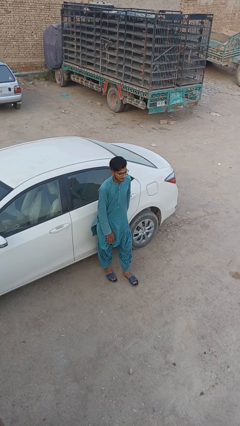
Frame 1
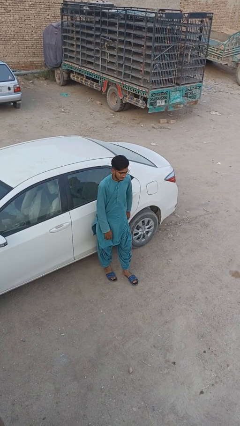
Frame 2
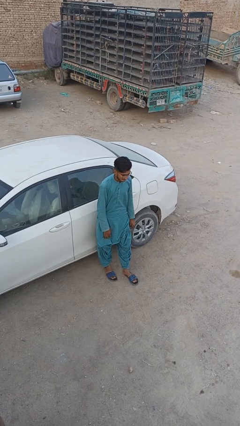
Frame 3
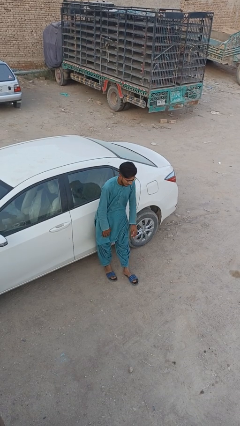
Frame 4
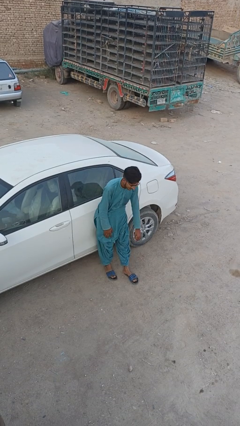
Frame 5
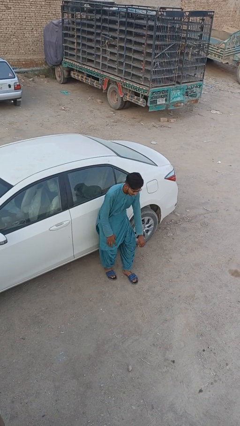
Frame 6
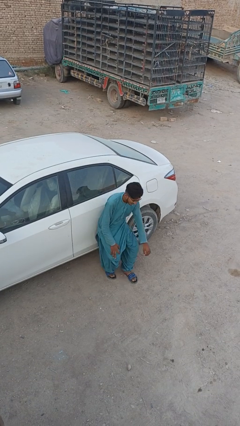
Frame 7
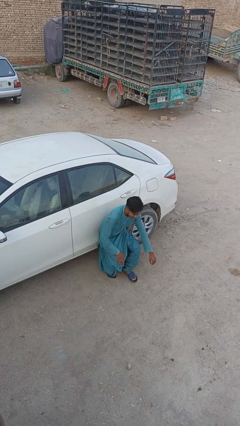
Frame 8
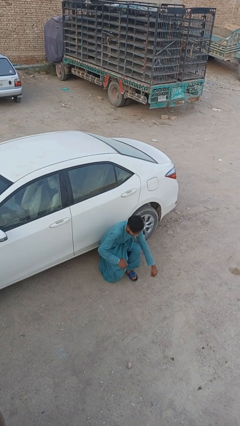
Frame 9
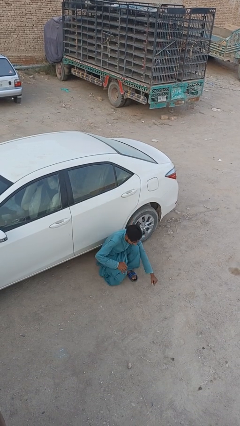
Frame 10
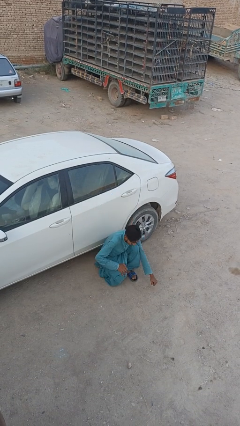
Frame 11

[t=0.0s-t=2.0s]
person leans against car

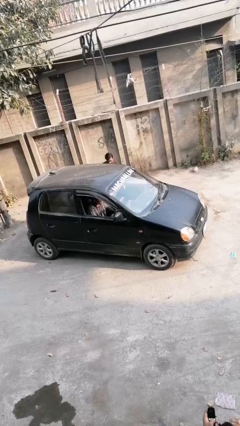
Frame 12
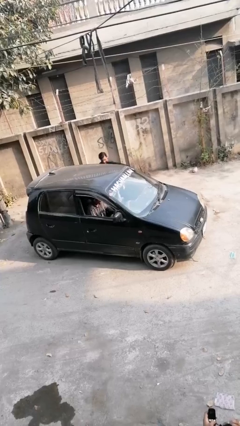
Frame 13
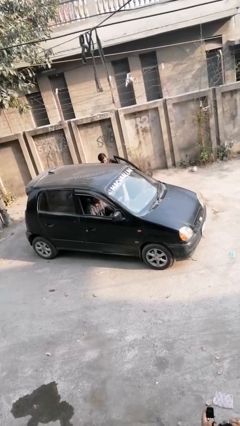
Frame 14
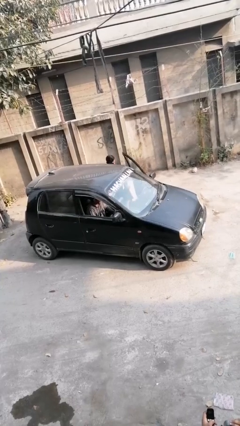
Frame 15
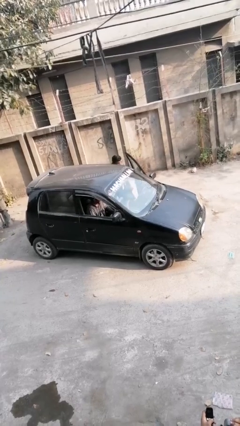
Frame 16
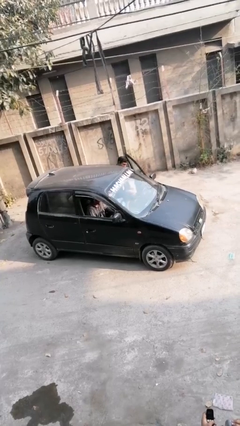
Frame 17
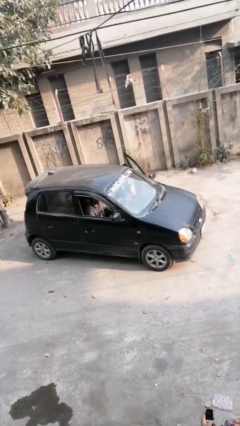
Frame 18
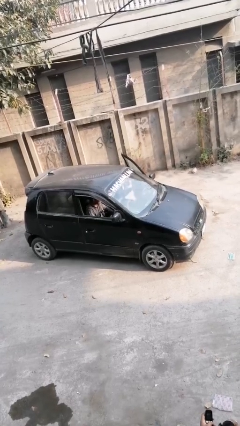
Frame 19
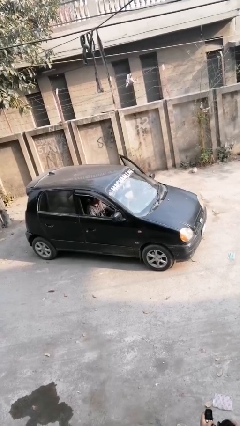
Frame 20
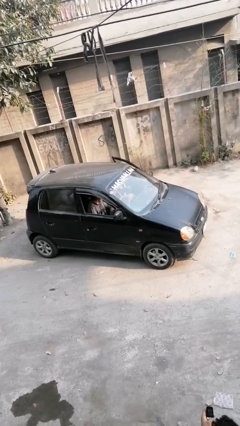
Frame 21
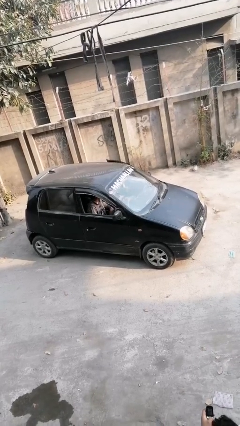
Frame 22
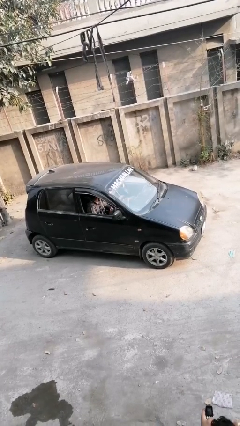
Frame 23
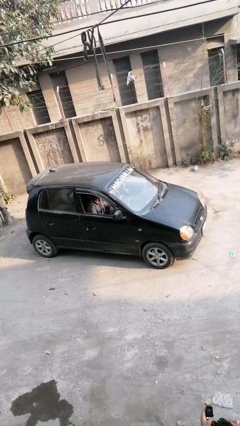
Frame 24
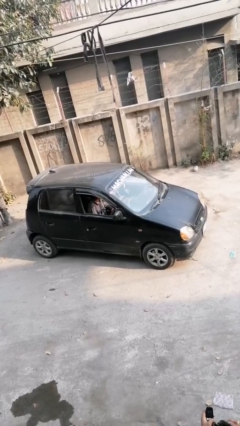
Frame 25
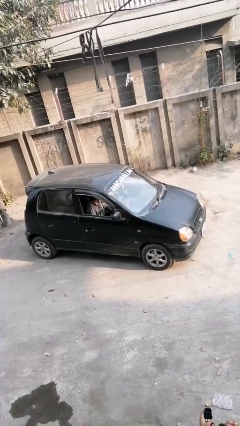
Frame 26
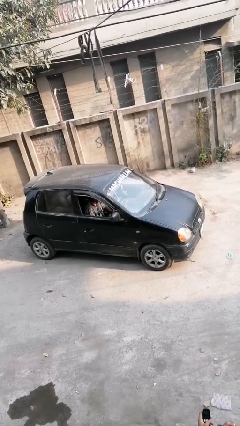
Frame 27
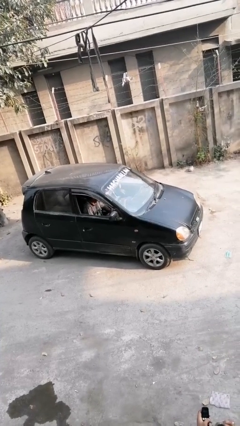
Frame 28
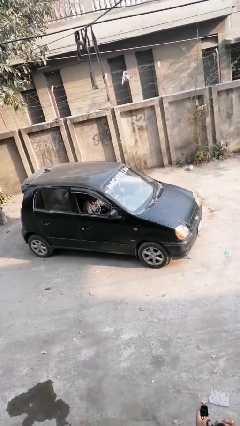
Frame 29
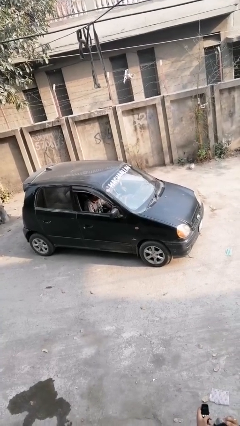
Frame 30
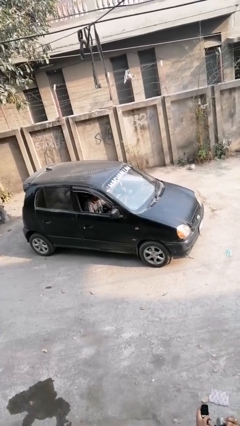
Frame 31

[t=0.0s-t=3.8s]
car picks up person

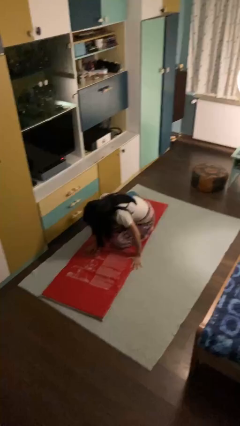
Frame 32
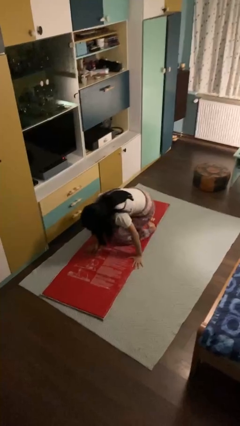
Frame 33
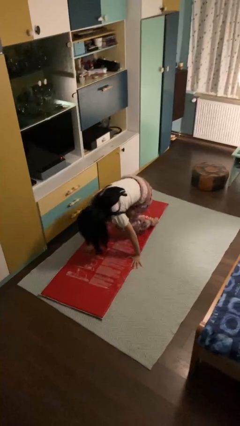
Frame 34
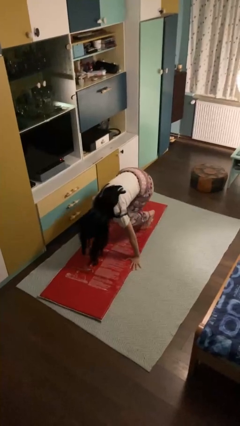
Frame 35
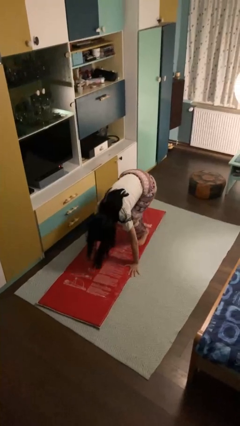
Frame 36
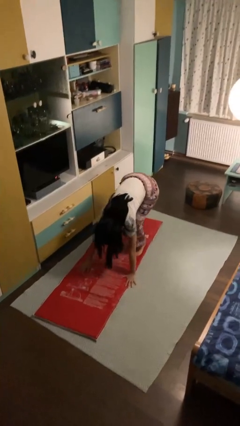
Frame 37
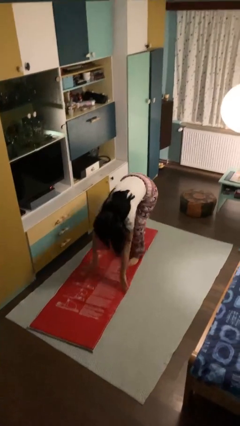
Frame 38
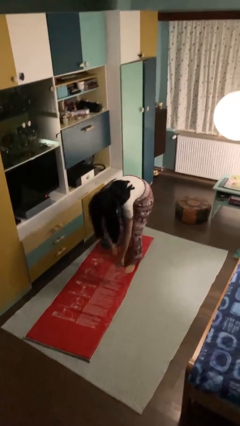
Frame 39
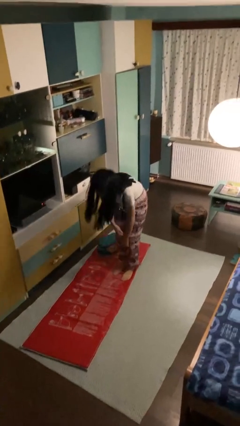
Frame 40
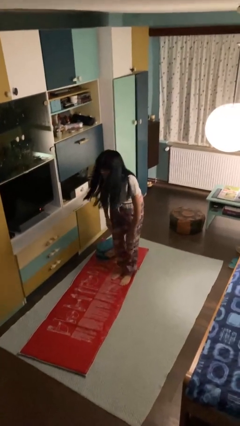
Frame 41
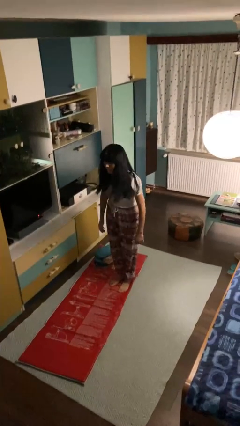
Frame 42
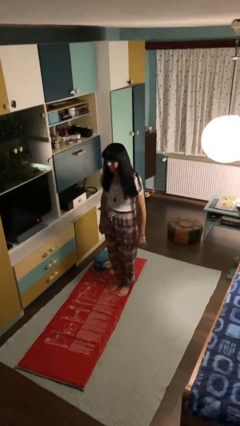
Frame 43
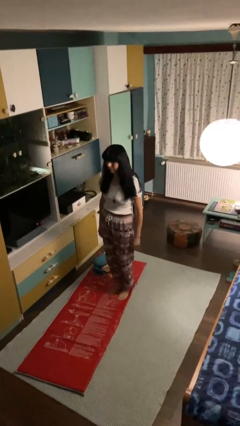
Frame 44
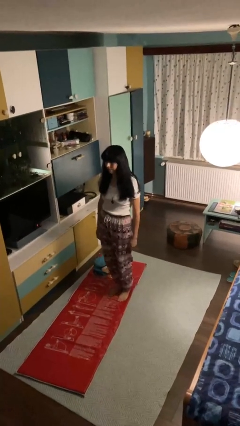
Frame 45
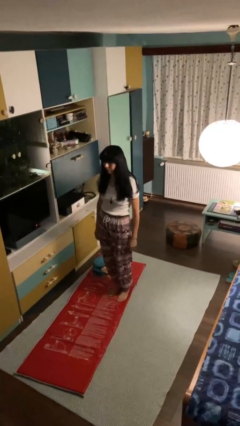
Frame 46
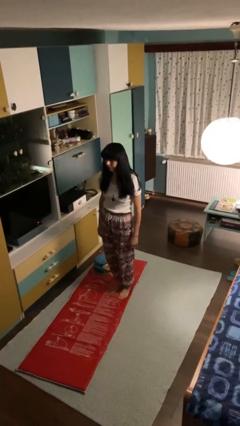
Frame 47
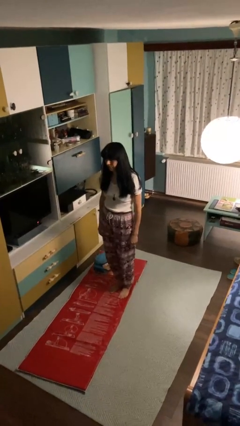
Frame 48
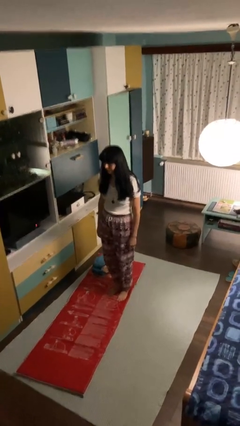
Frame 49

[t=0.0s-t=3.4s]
person stands up from floor

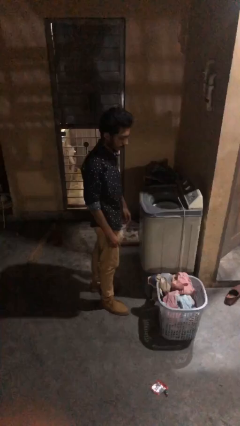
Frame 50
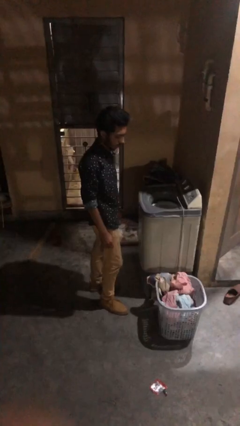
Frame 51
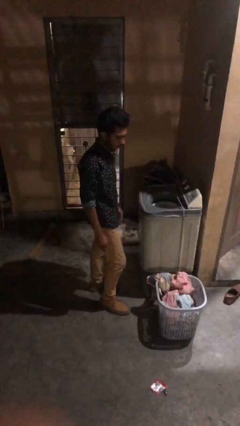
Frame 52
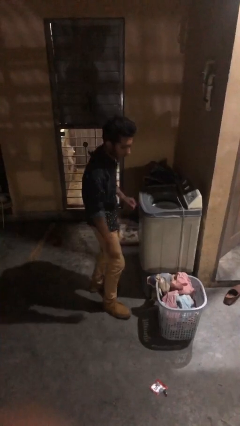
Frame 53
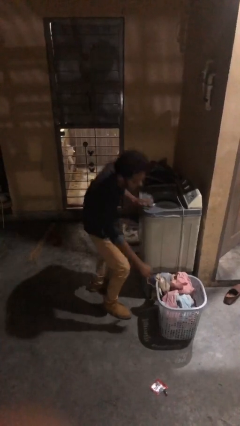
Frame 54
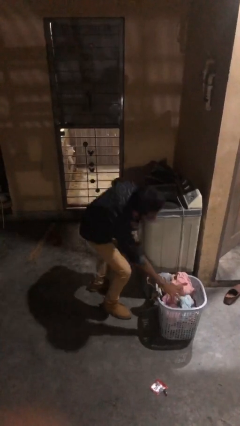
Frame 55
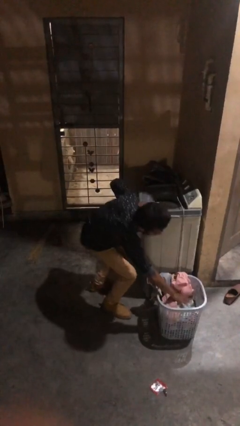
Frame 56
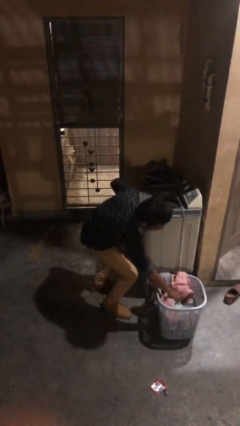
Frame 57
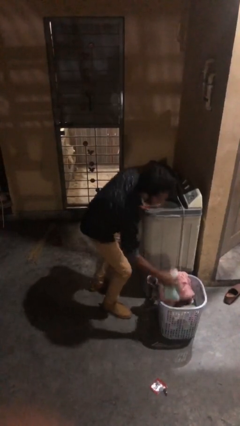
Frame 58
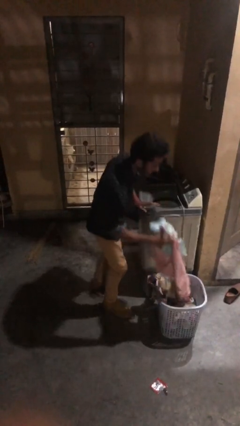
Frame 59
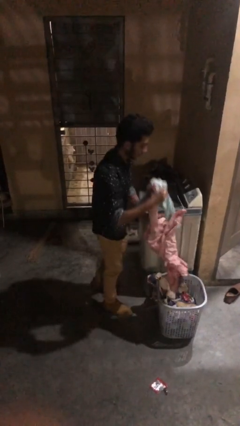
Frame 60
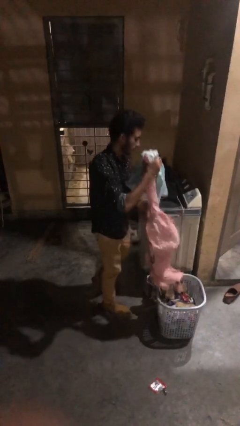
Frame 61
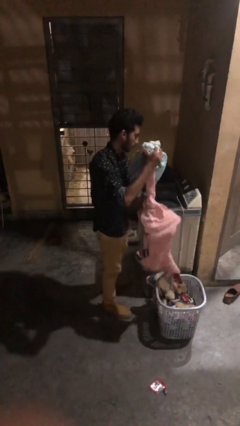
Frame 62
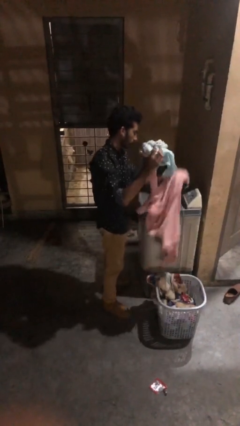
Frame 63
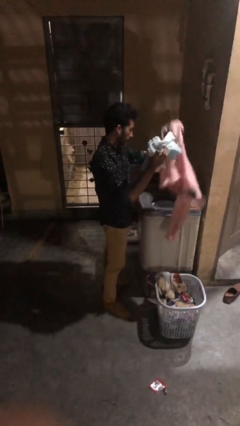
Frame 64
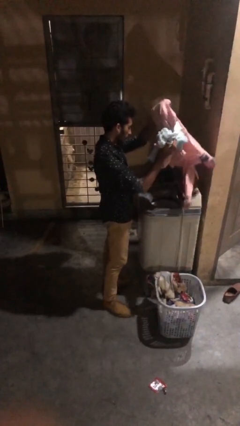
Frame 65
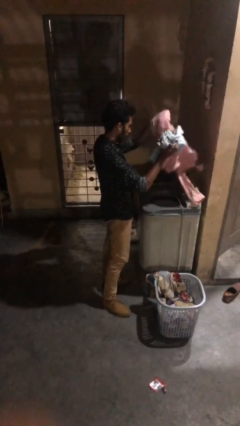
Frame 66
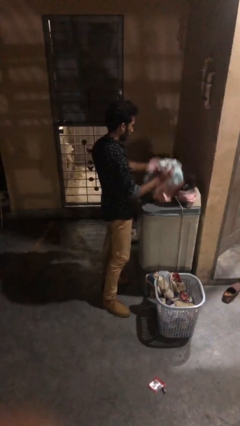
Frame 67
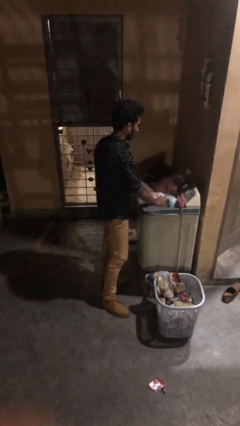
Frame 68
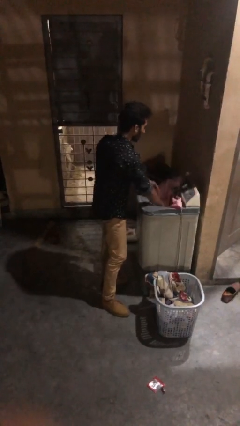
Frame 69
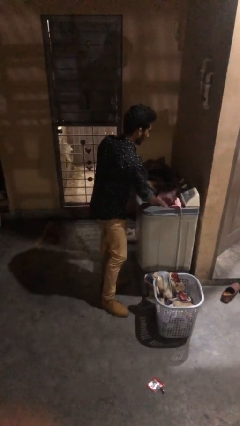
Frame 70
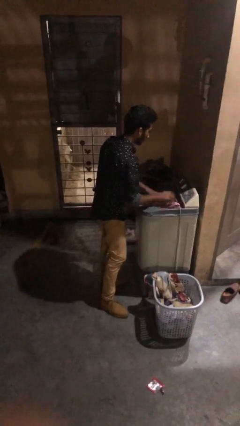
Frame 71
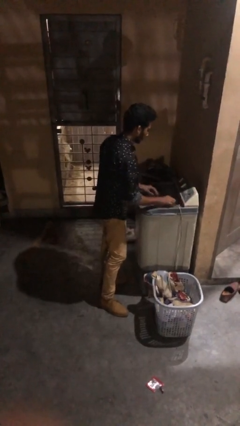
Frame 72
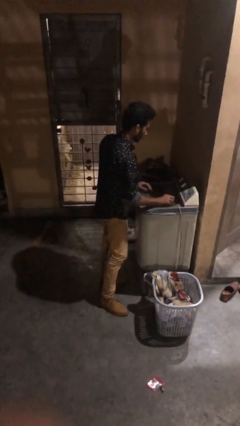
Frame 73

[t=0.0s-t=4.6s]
person loads clotheswasher

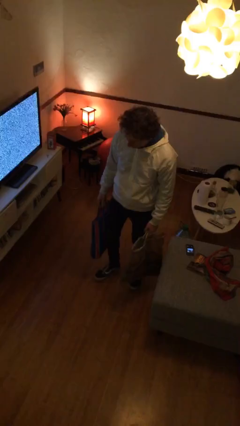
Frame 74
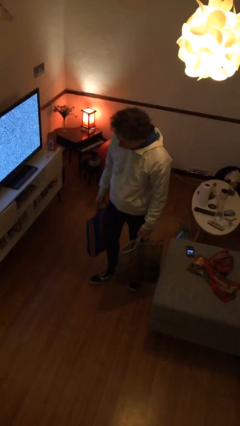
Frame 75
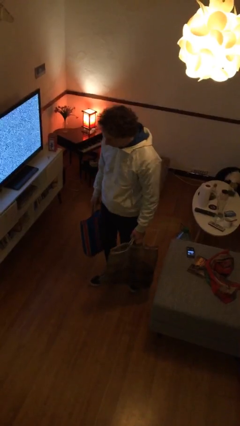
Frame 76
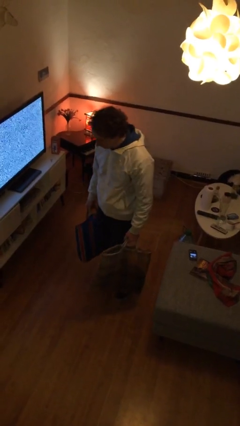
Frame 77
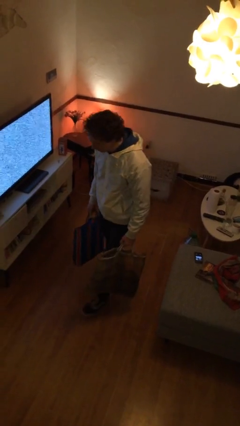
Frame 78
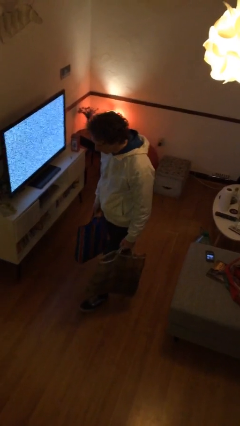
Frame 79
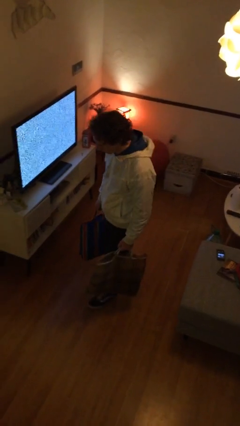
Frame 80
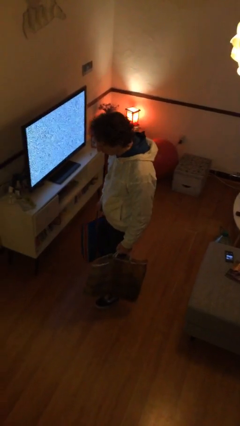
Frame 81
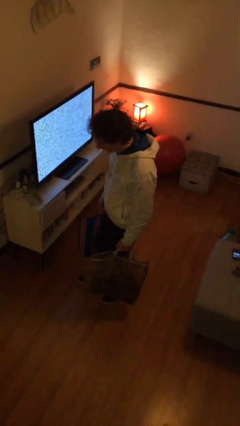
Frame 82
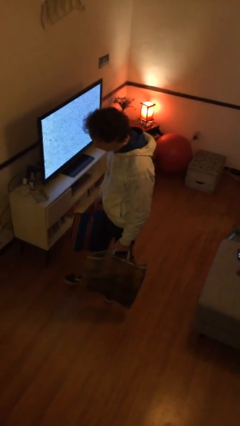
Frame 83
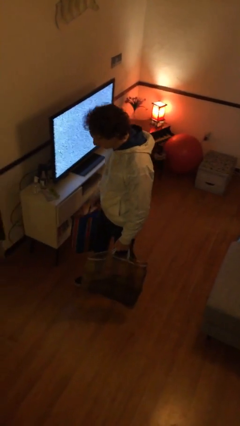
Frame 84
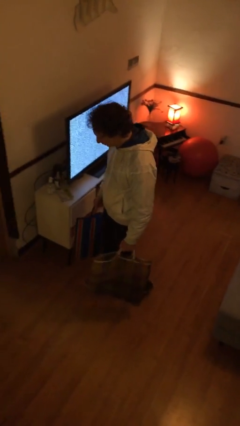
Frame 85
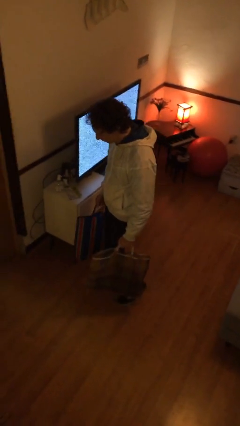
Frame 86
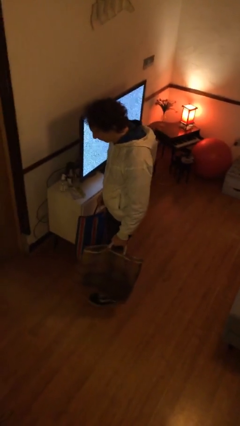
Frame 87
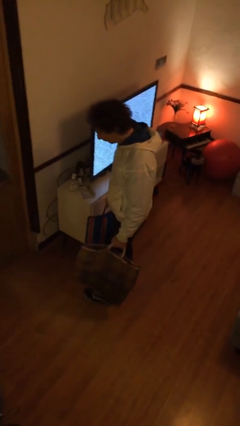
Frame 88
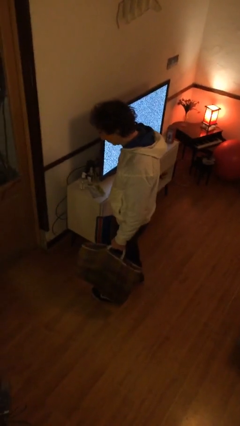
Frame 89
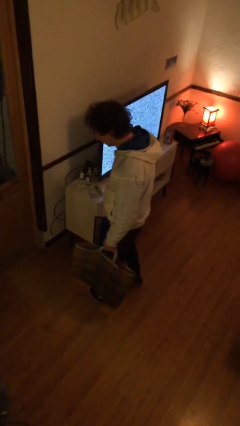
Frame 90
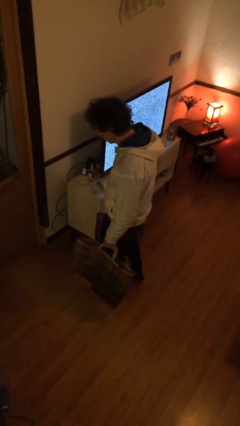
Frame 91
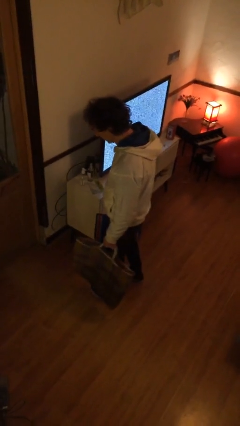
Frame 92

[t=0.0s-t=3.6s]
person carries groceries

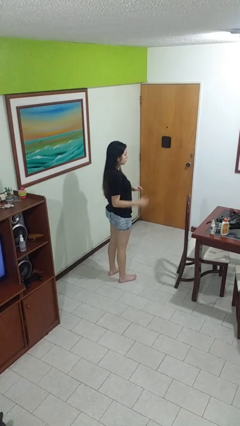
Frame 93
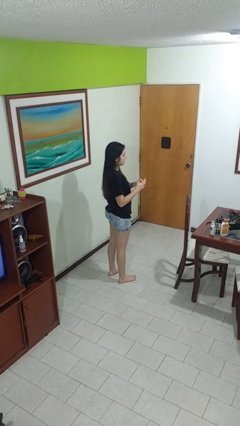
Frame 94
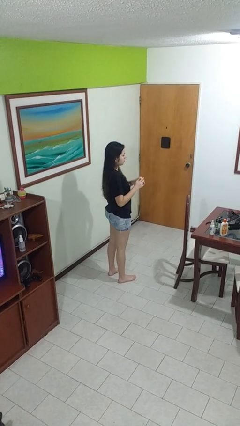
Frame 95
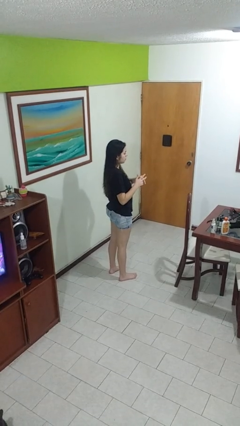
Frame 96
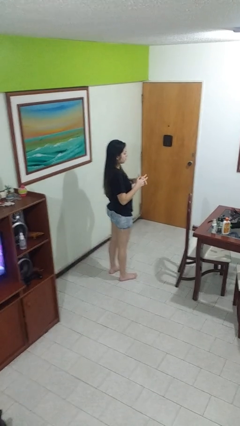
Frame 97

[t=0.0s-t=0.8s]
person puts on ring
